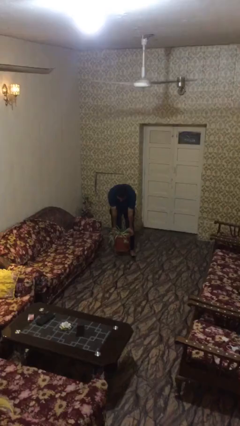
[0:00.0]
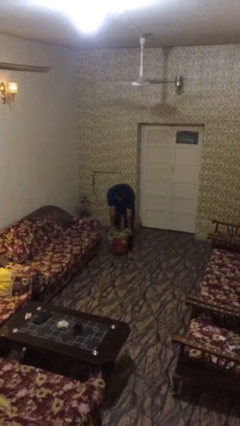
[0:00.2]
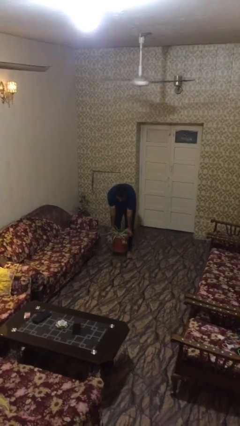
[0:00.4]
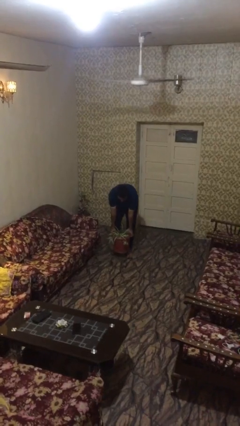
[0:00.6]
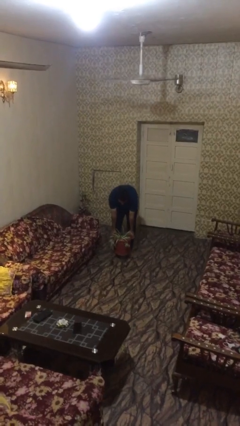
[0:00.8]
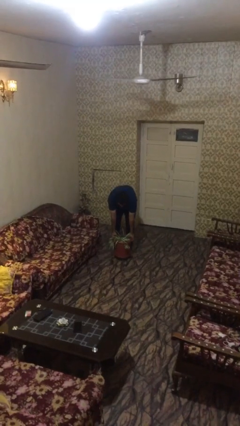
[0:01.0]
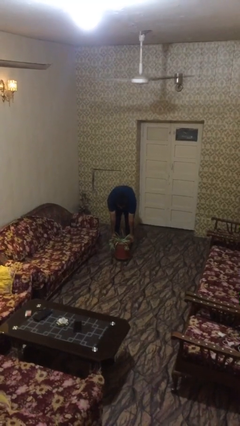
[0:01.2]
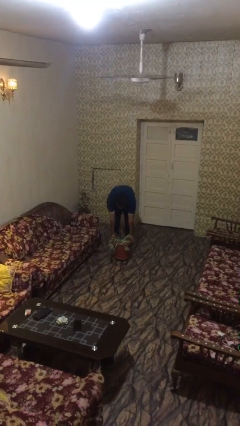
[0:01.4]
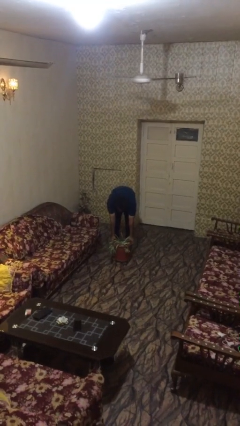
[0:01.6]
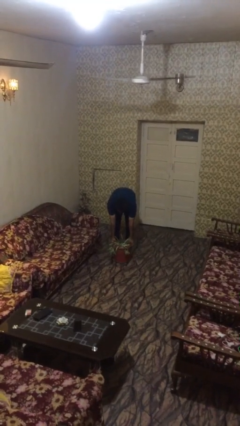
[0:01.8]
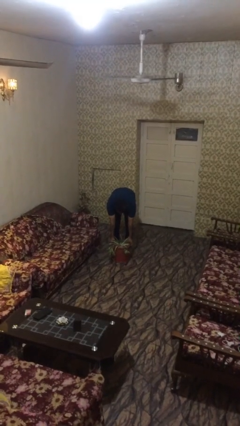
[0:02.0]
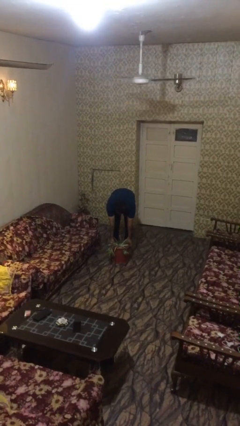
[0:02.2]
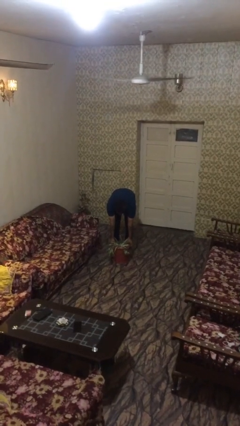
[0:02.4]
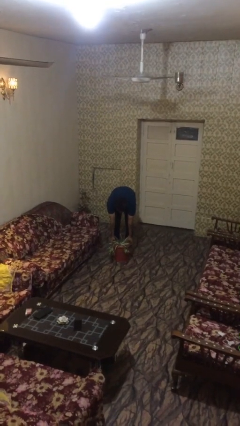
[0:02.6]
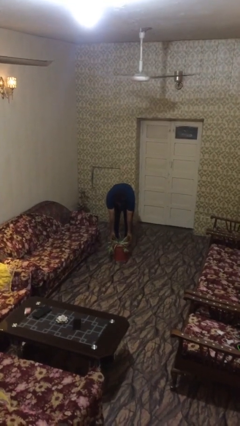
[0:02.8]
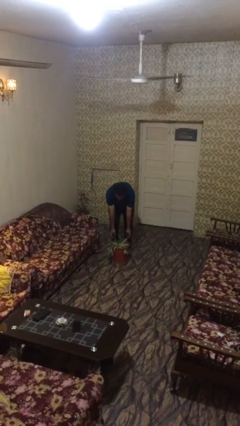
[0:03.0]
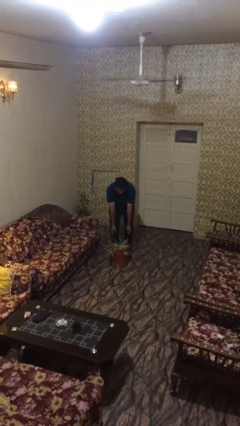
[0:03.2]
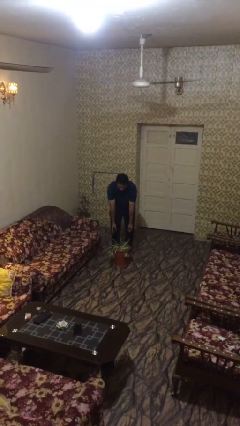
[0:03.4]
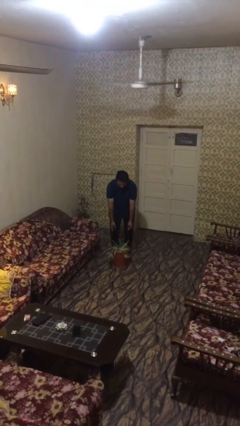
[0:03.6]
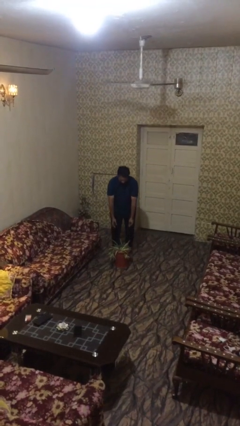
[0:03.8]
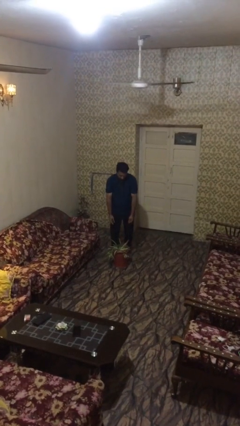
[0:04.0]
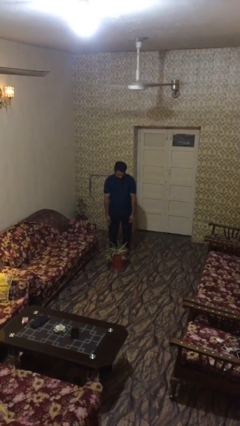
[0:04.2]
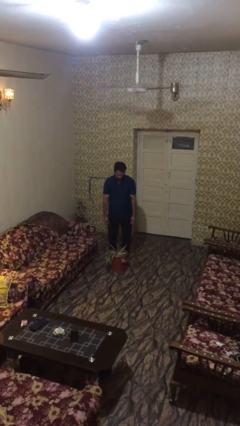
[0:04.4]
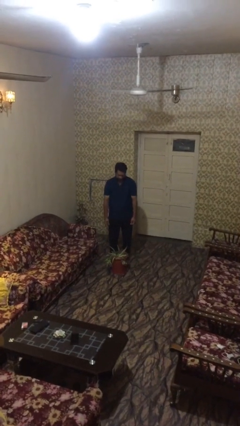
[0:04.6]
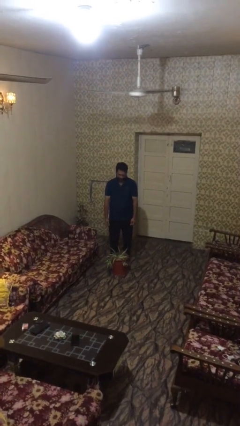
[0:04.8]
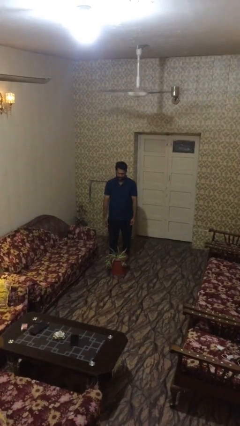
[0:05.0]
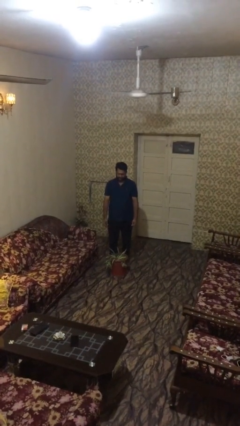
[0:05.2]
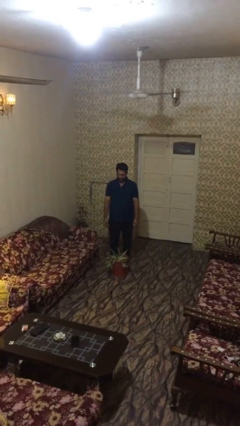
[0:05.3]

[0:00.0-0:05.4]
person puts down object on floor

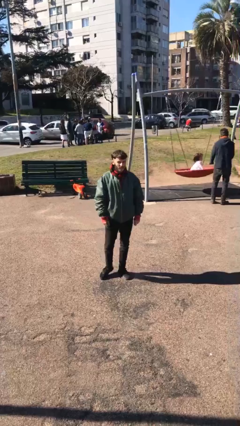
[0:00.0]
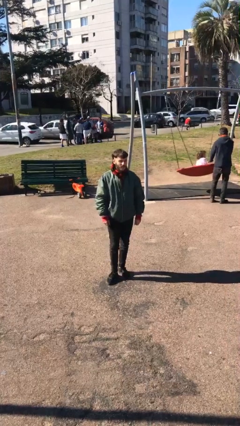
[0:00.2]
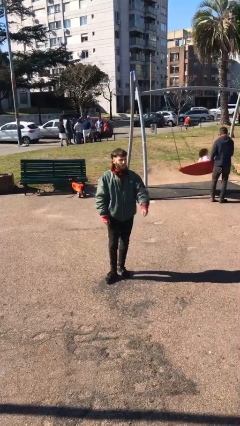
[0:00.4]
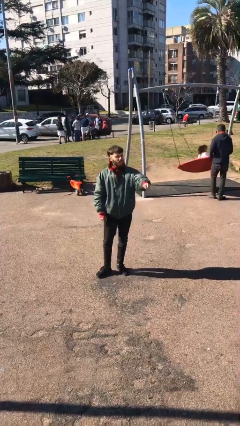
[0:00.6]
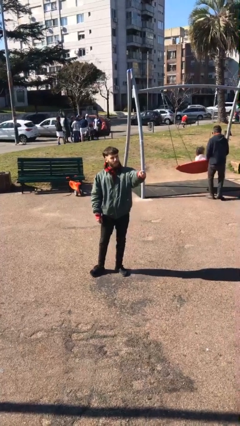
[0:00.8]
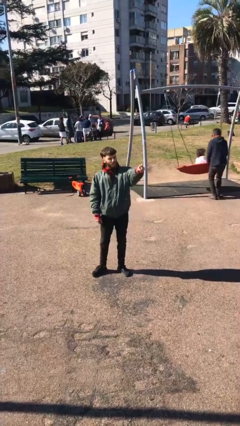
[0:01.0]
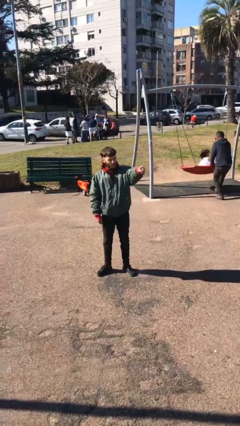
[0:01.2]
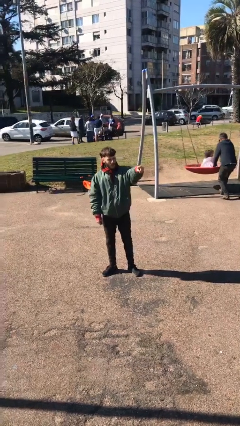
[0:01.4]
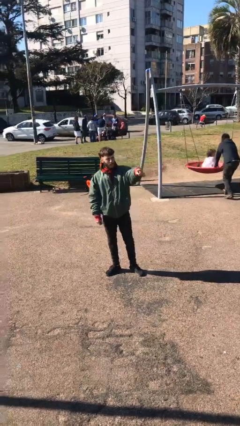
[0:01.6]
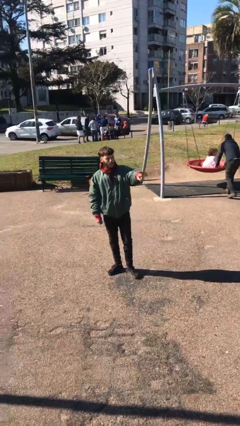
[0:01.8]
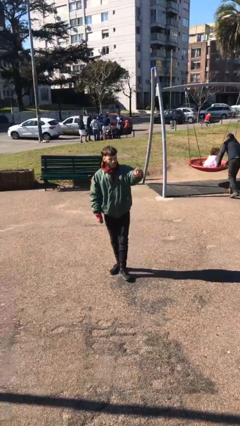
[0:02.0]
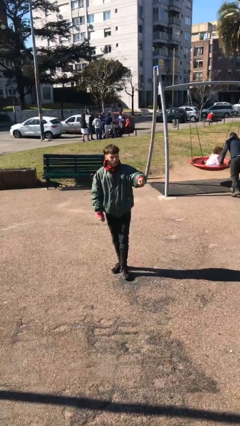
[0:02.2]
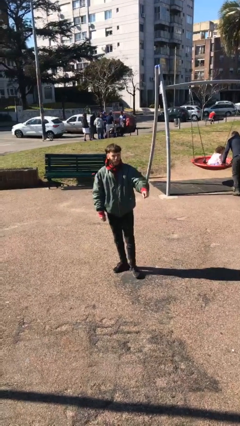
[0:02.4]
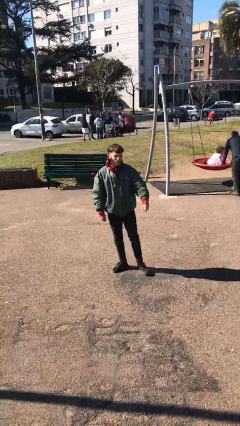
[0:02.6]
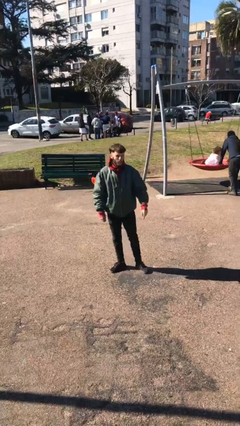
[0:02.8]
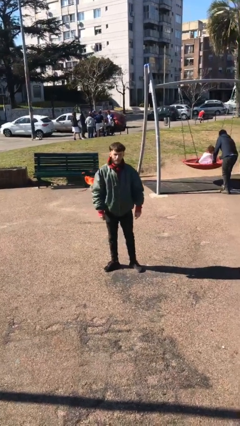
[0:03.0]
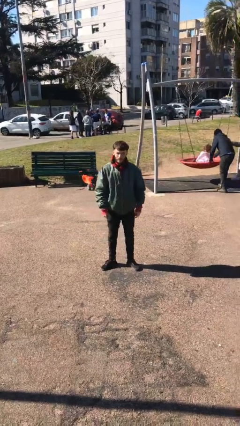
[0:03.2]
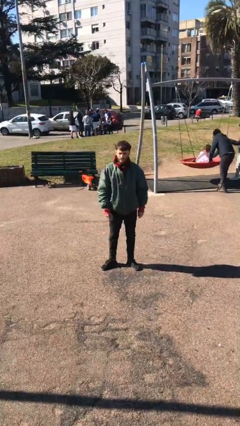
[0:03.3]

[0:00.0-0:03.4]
person points at person

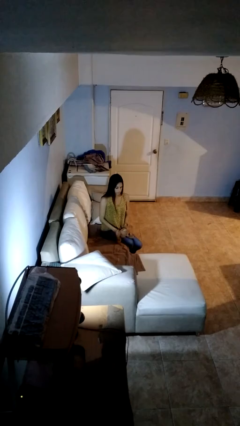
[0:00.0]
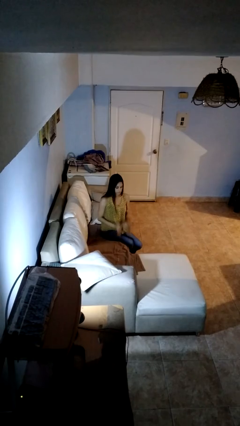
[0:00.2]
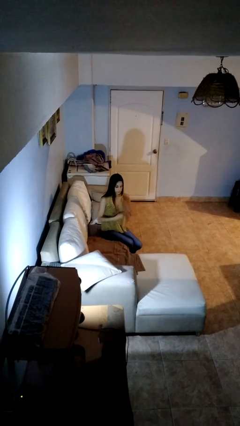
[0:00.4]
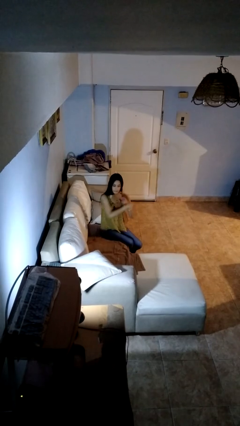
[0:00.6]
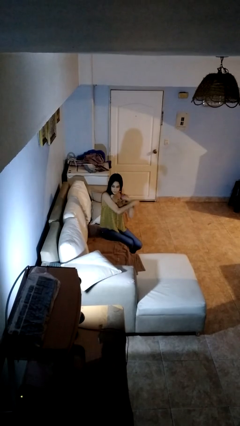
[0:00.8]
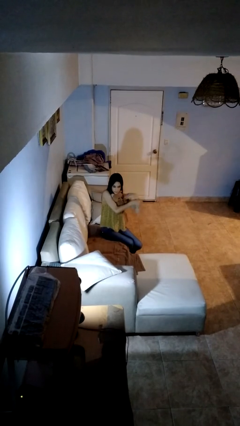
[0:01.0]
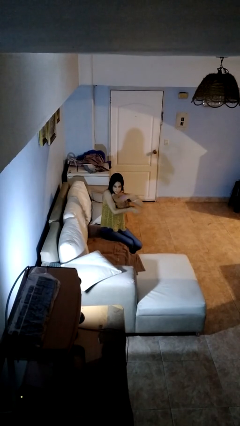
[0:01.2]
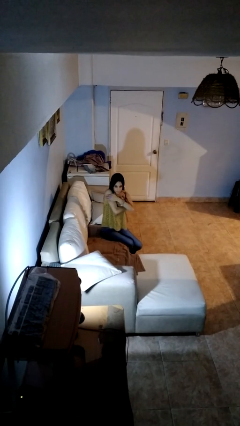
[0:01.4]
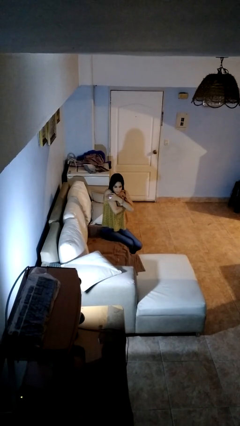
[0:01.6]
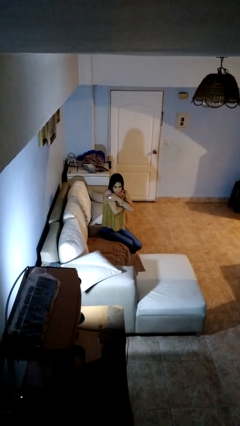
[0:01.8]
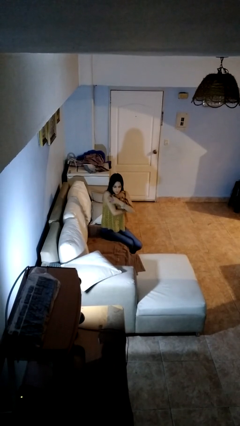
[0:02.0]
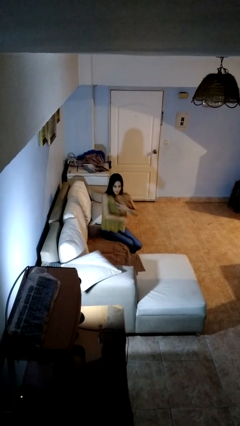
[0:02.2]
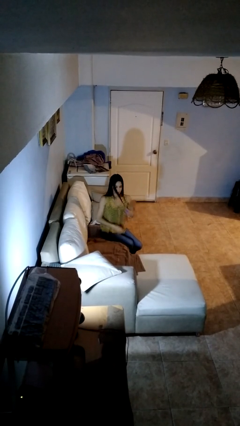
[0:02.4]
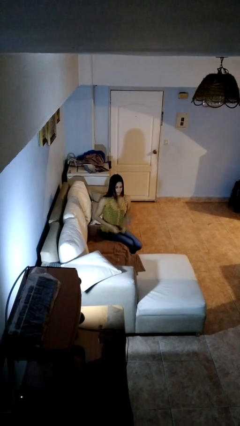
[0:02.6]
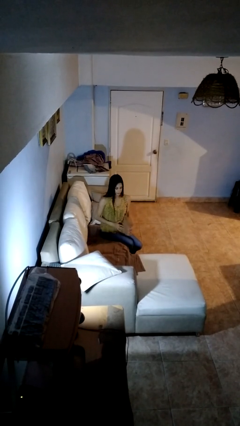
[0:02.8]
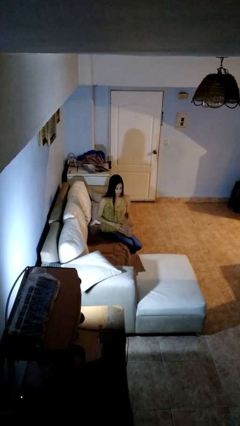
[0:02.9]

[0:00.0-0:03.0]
person hugs stuffed animal

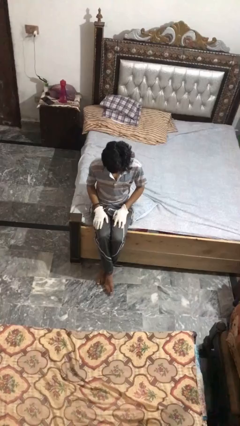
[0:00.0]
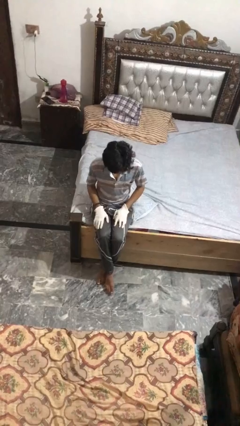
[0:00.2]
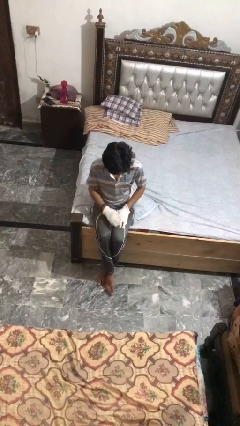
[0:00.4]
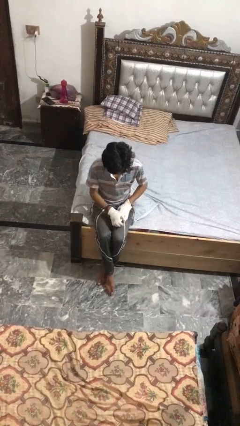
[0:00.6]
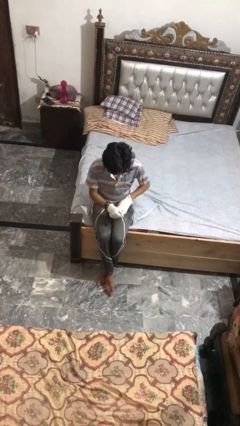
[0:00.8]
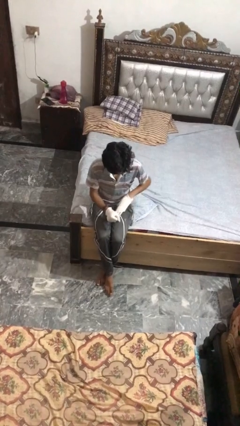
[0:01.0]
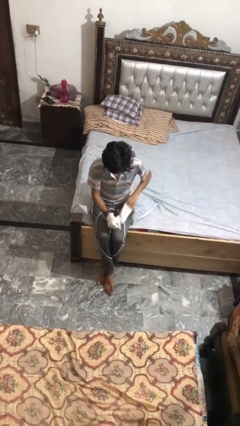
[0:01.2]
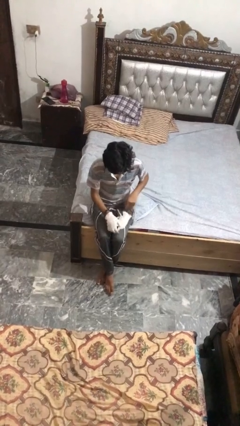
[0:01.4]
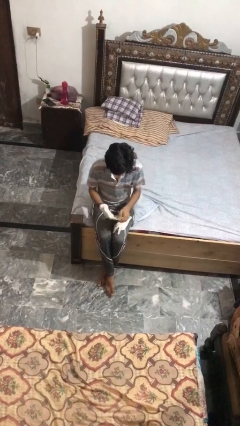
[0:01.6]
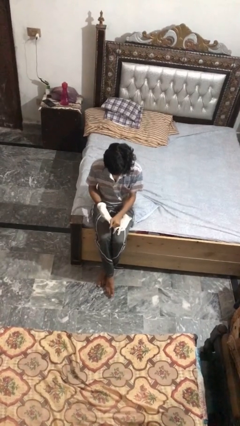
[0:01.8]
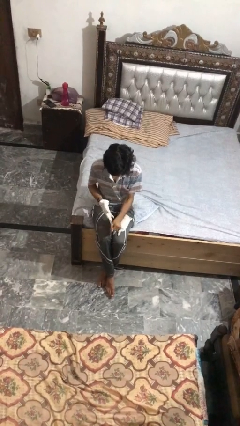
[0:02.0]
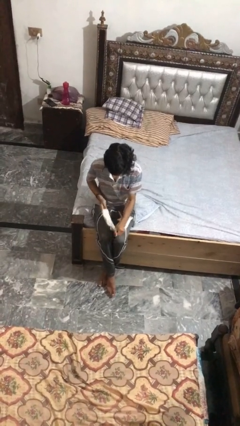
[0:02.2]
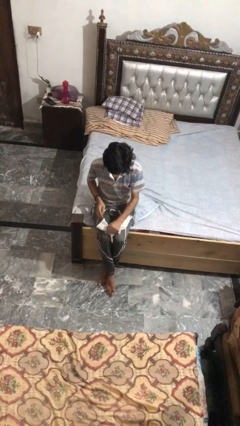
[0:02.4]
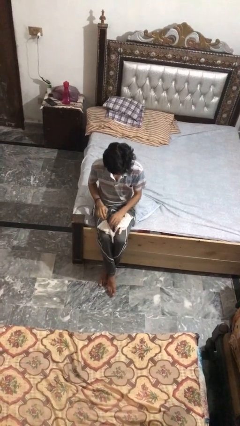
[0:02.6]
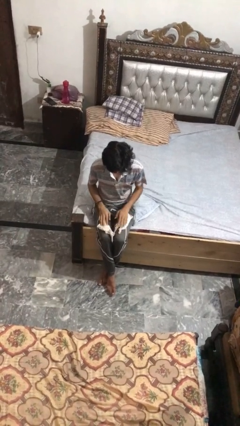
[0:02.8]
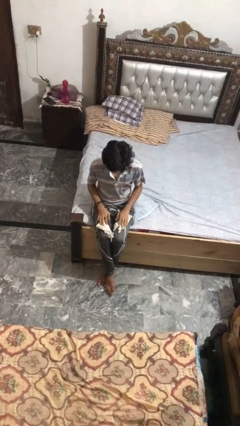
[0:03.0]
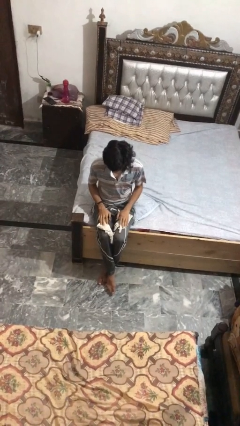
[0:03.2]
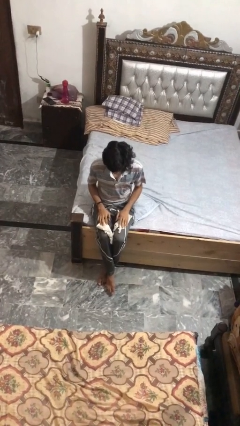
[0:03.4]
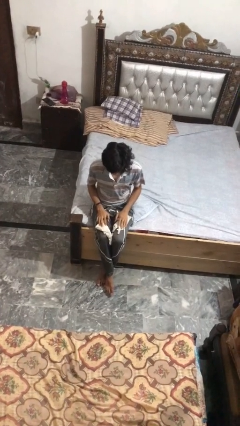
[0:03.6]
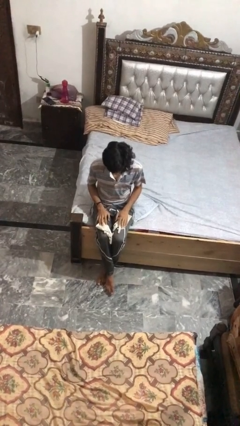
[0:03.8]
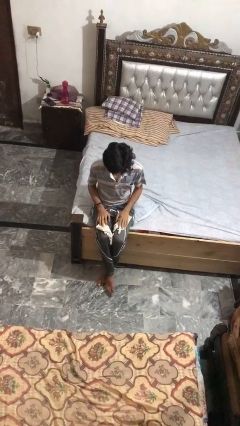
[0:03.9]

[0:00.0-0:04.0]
person takes off gloves

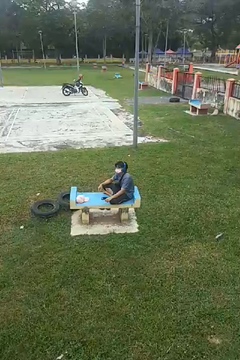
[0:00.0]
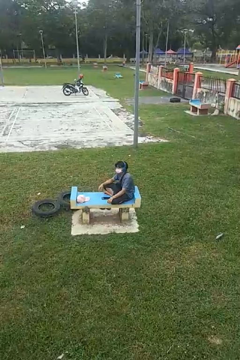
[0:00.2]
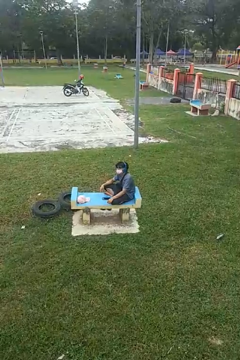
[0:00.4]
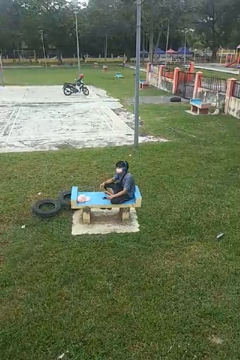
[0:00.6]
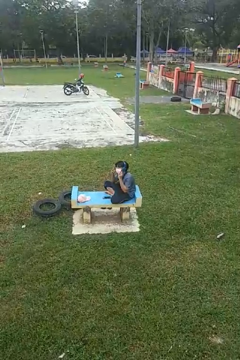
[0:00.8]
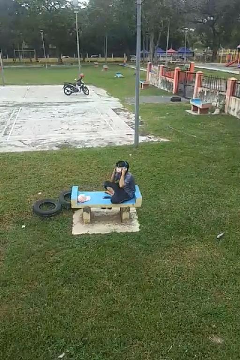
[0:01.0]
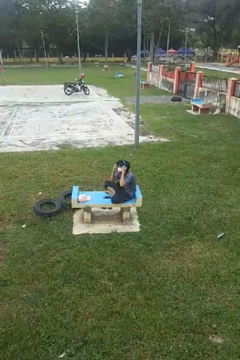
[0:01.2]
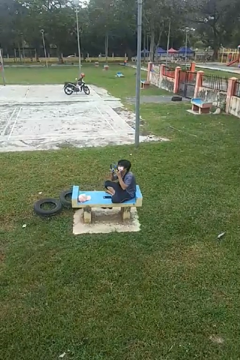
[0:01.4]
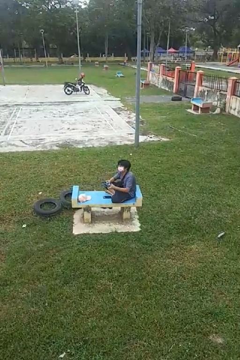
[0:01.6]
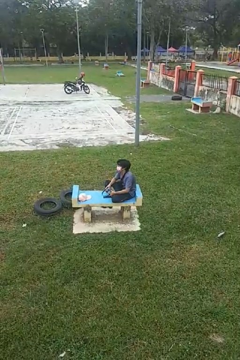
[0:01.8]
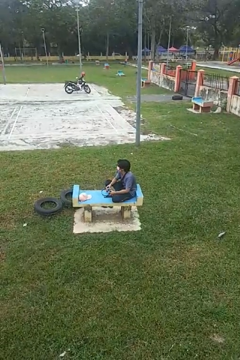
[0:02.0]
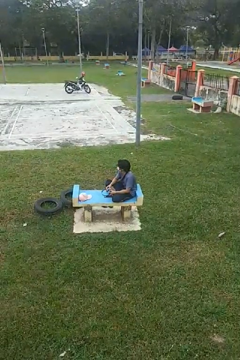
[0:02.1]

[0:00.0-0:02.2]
person takes off headphones

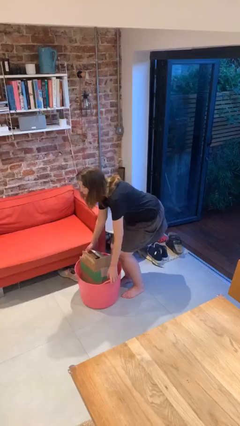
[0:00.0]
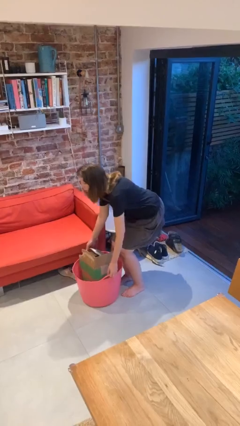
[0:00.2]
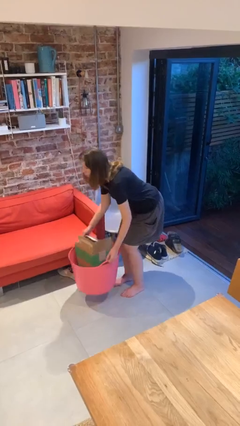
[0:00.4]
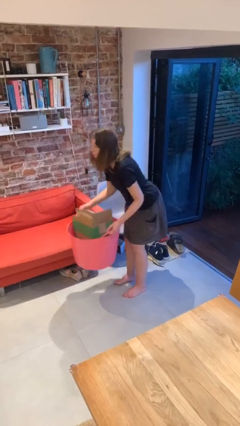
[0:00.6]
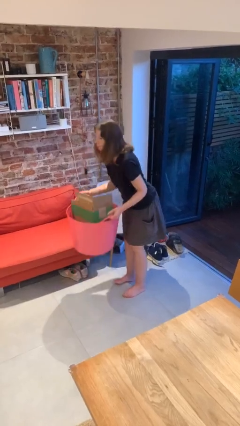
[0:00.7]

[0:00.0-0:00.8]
person picks up object from floor
